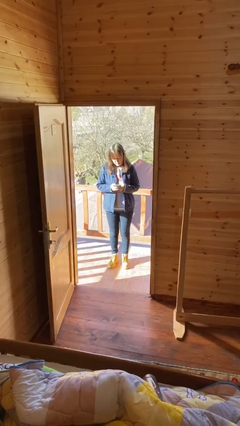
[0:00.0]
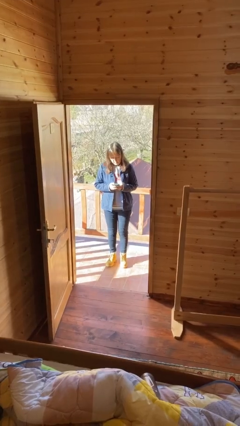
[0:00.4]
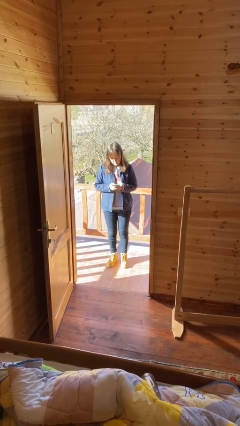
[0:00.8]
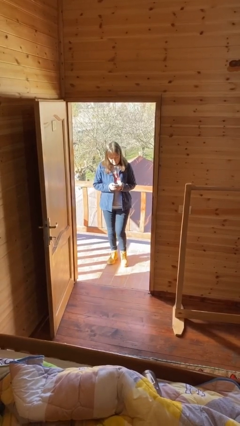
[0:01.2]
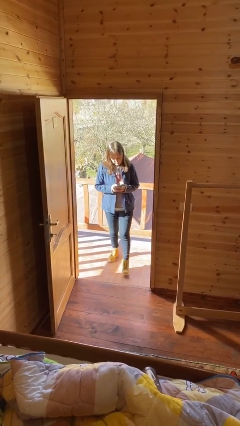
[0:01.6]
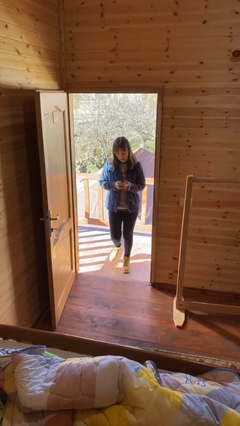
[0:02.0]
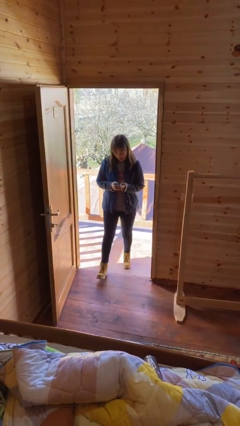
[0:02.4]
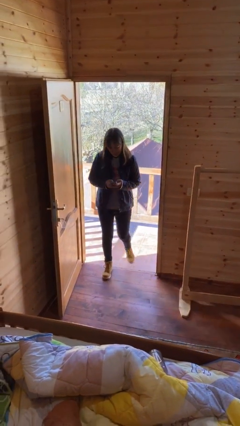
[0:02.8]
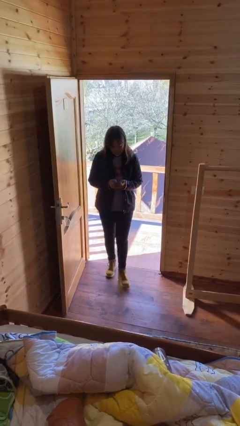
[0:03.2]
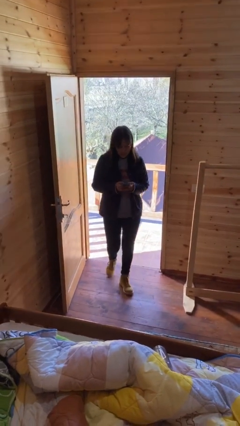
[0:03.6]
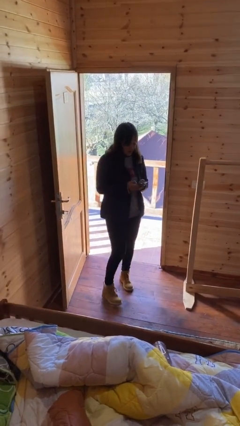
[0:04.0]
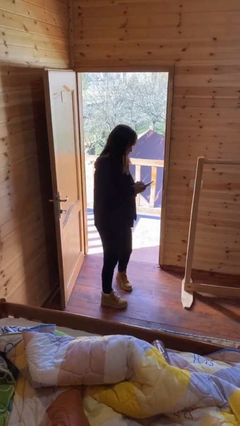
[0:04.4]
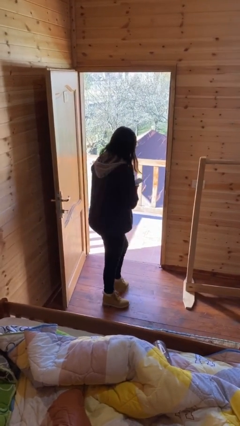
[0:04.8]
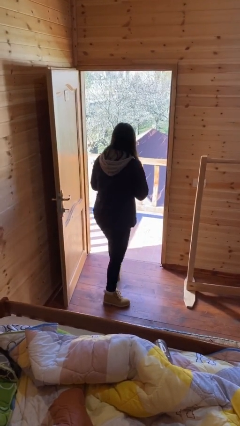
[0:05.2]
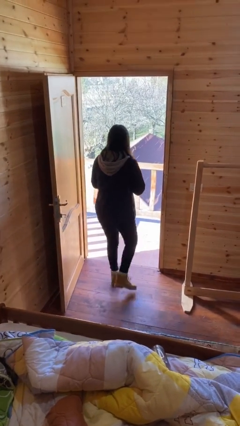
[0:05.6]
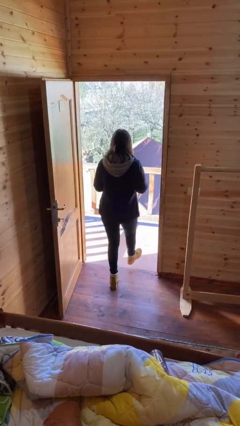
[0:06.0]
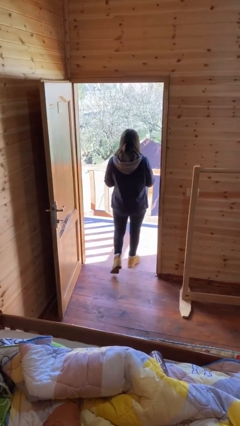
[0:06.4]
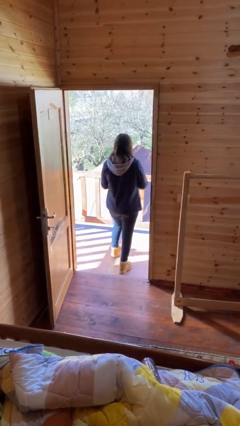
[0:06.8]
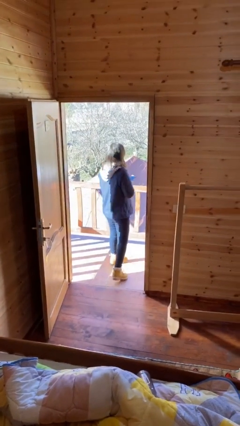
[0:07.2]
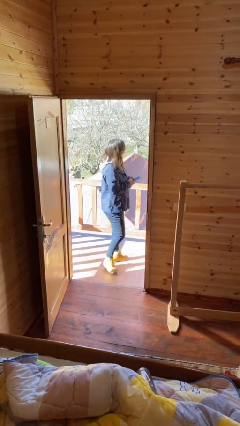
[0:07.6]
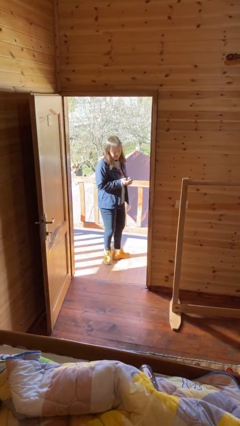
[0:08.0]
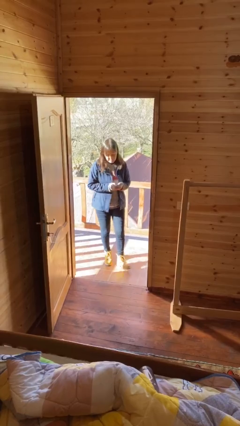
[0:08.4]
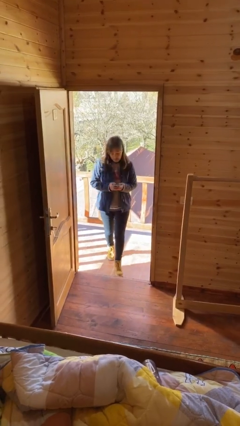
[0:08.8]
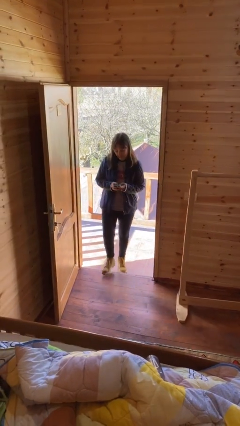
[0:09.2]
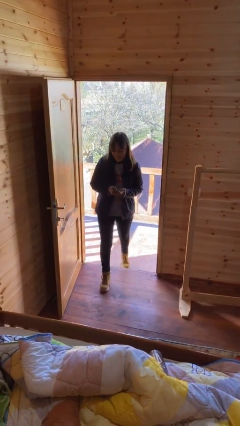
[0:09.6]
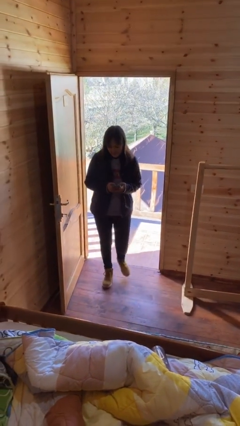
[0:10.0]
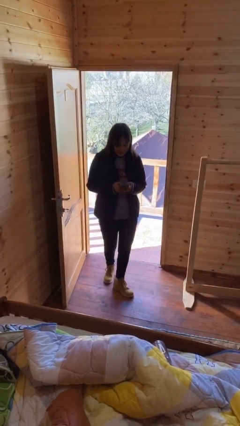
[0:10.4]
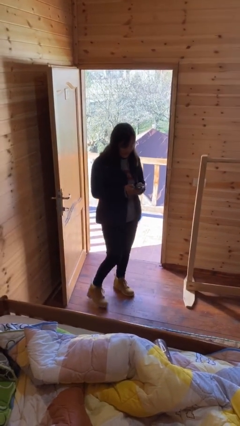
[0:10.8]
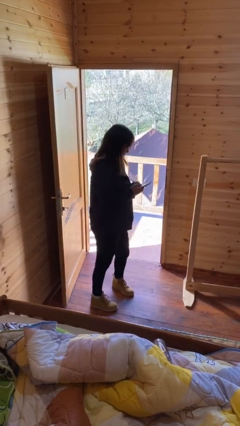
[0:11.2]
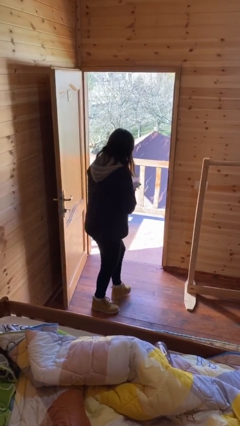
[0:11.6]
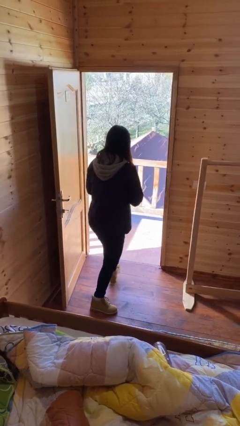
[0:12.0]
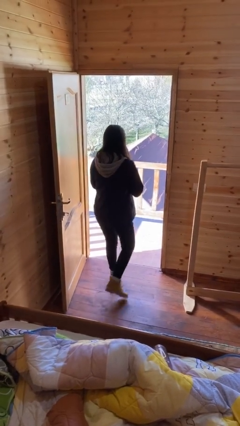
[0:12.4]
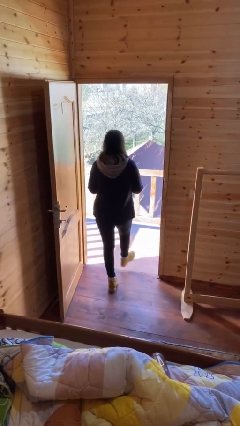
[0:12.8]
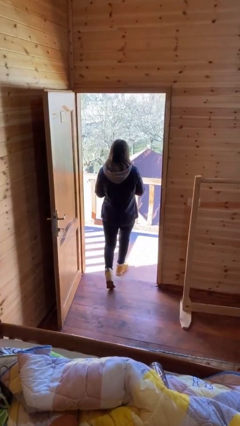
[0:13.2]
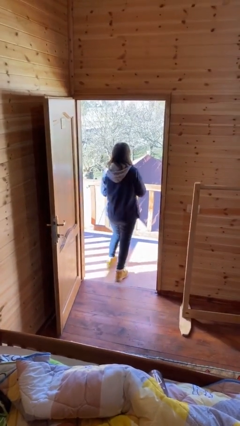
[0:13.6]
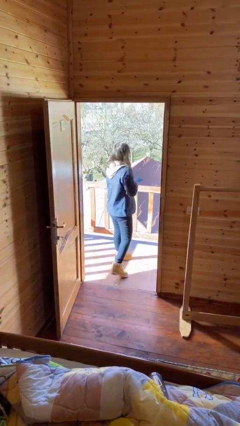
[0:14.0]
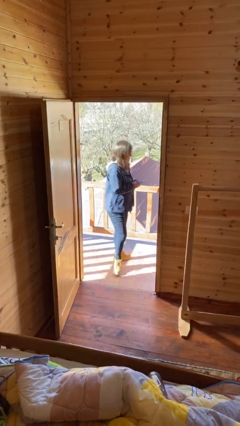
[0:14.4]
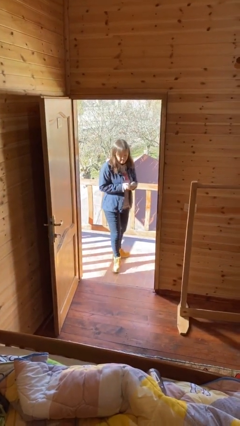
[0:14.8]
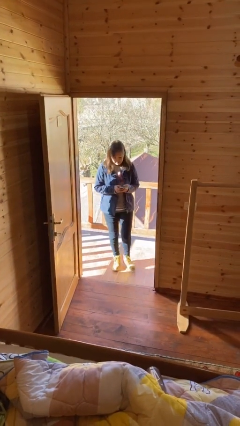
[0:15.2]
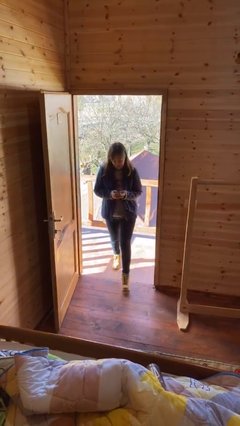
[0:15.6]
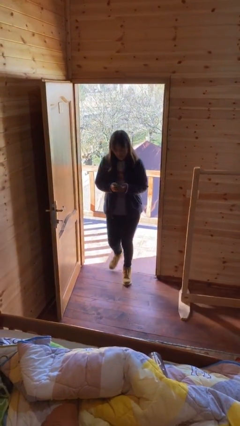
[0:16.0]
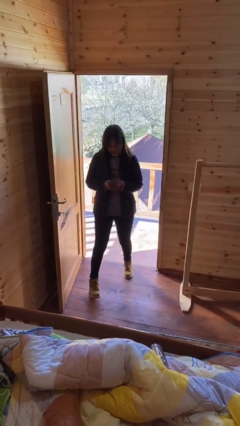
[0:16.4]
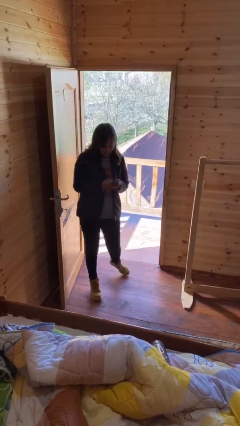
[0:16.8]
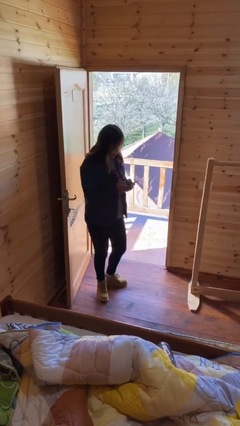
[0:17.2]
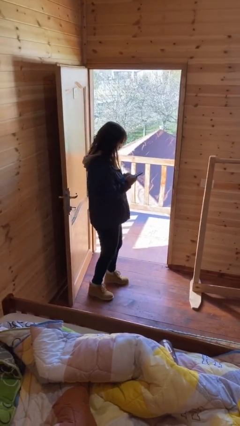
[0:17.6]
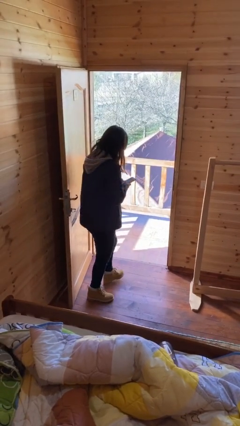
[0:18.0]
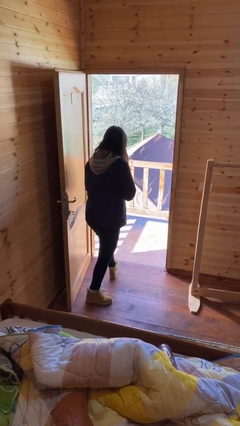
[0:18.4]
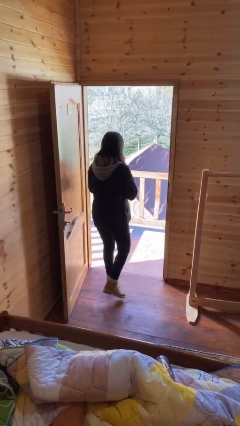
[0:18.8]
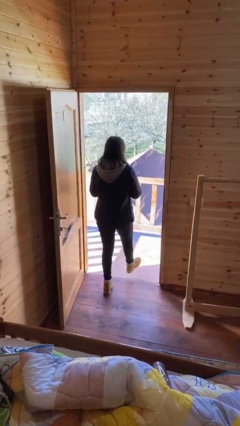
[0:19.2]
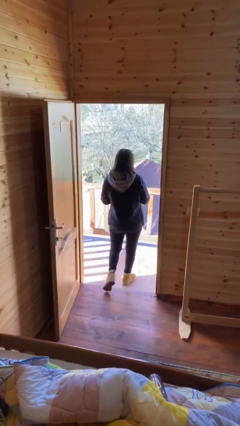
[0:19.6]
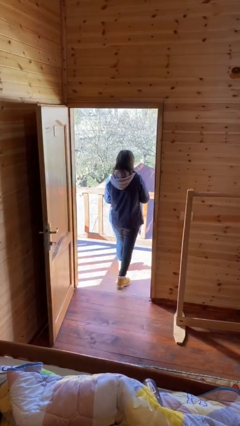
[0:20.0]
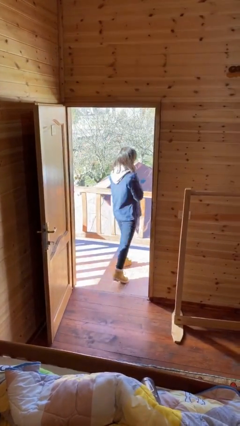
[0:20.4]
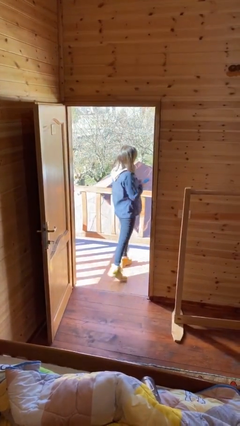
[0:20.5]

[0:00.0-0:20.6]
person texts on phone

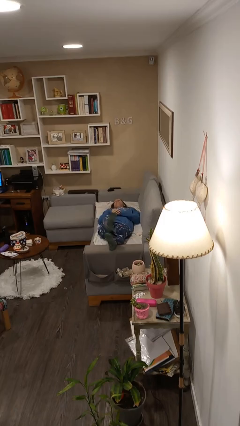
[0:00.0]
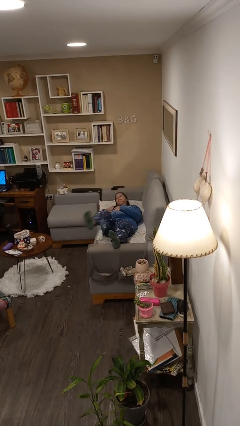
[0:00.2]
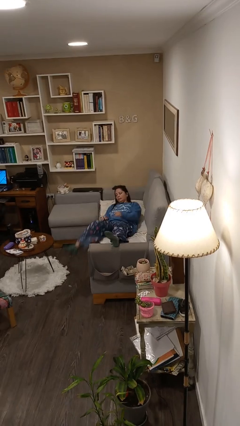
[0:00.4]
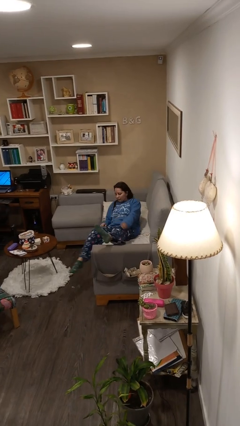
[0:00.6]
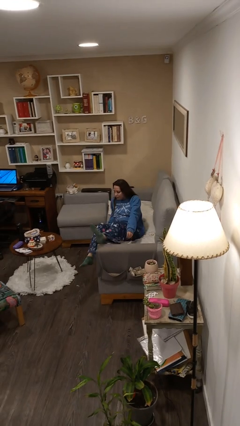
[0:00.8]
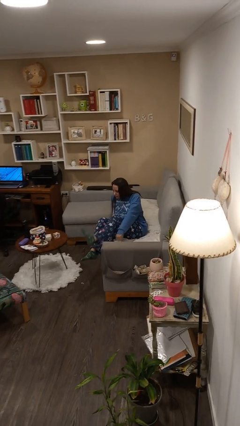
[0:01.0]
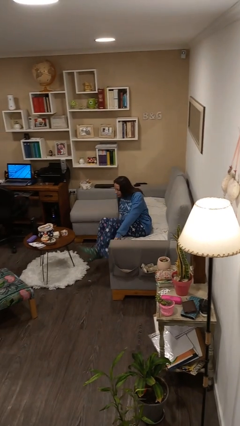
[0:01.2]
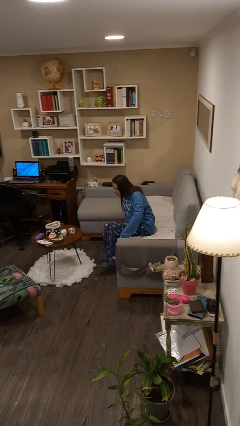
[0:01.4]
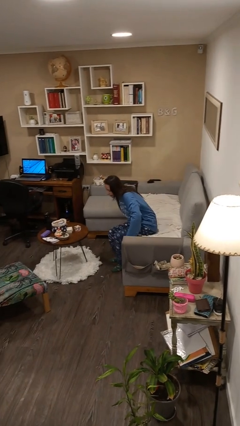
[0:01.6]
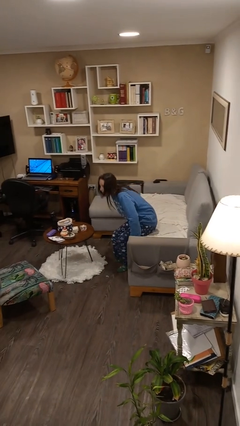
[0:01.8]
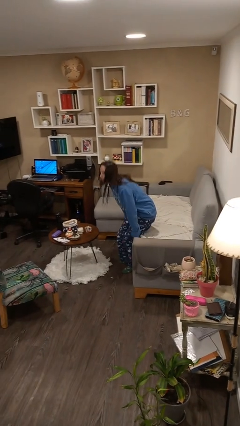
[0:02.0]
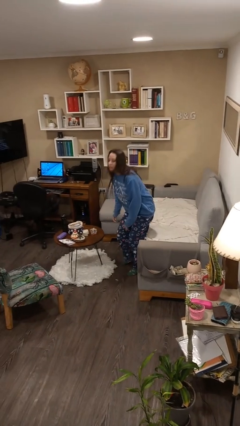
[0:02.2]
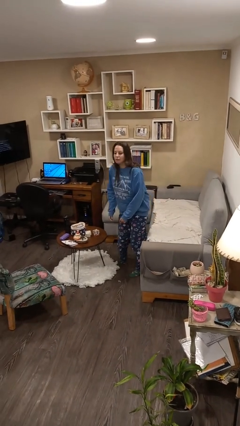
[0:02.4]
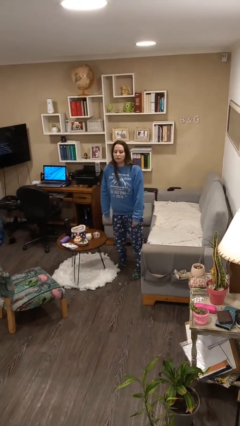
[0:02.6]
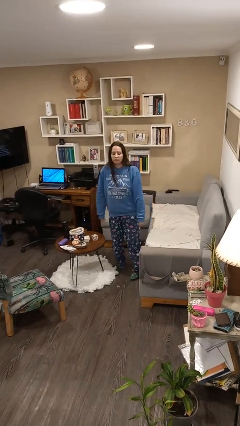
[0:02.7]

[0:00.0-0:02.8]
person stands up

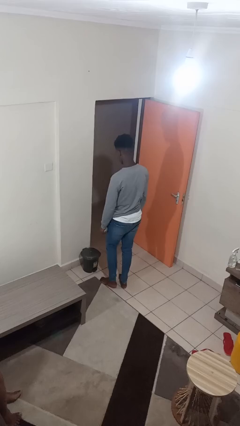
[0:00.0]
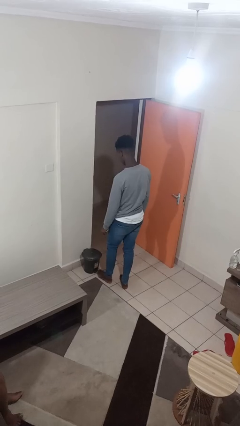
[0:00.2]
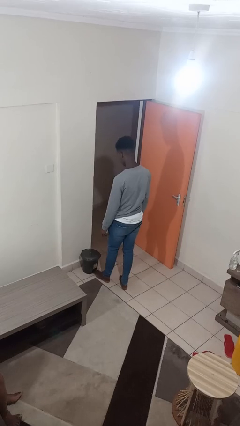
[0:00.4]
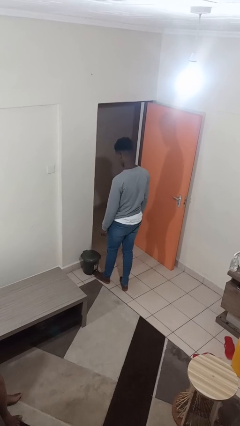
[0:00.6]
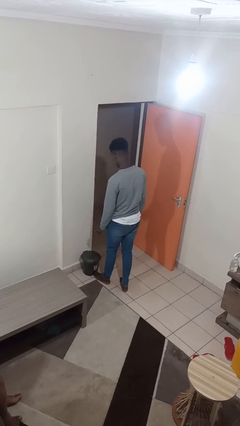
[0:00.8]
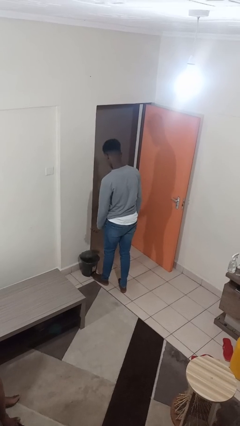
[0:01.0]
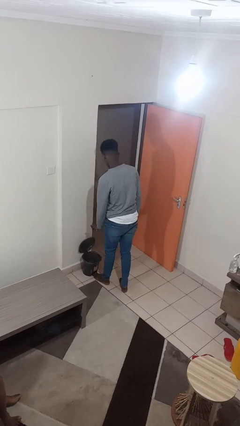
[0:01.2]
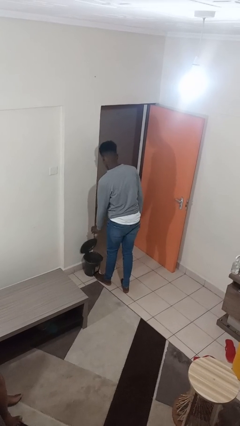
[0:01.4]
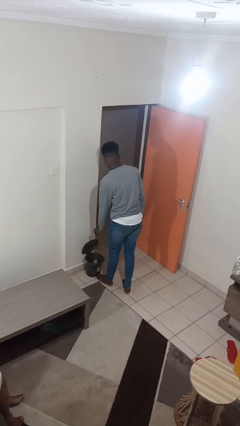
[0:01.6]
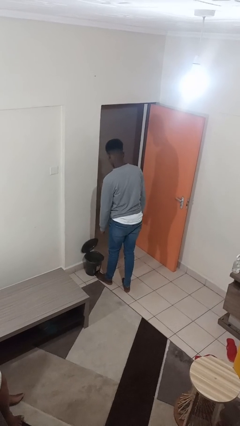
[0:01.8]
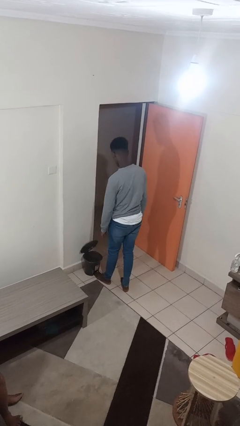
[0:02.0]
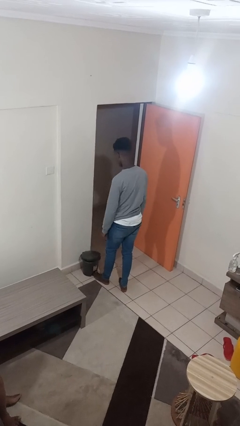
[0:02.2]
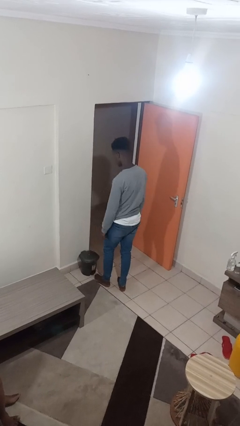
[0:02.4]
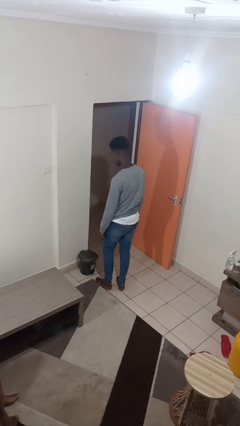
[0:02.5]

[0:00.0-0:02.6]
person discards trash

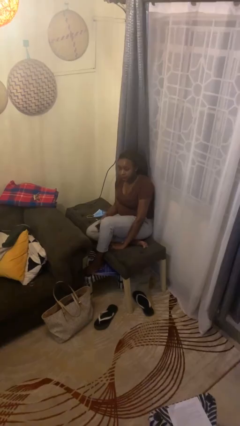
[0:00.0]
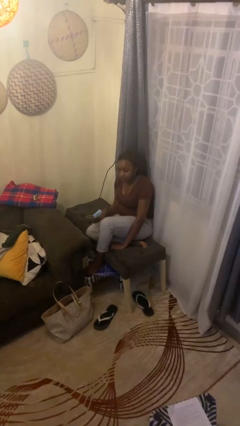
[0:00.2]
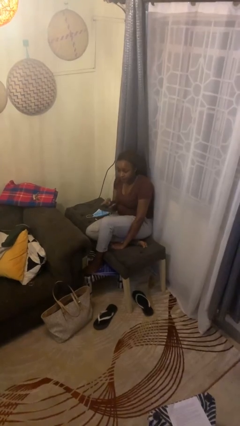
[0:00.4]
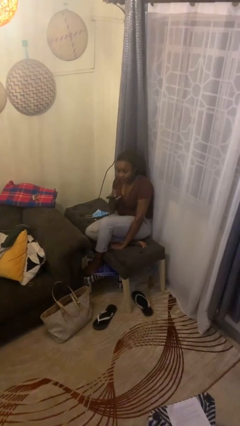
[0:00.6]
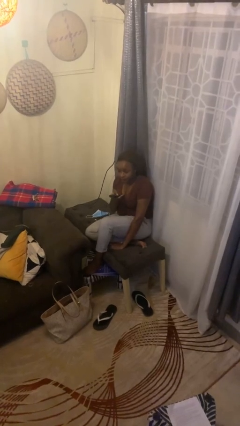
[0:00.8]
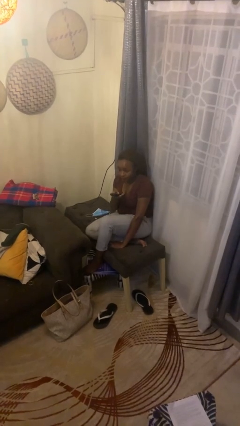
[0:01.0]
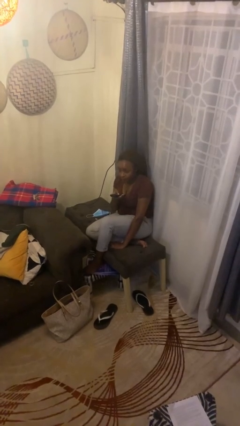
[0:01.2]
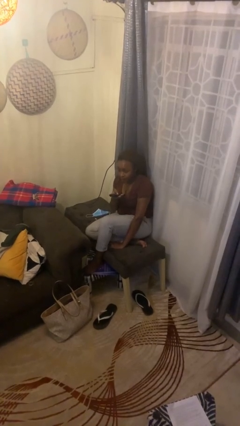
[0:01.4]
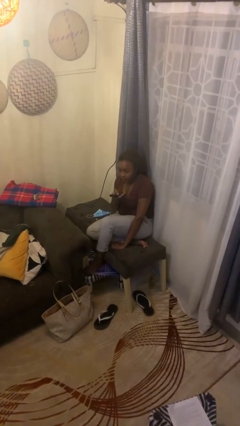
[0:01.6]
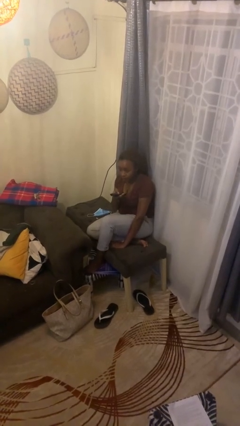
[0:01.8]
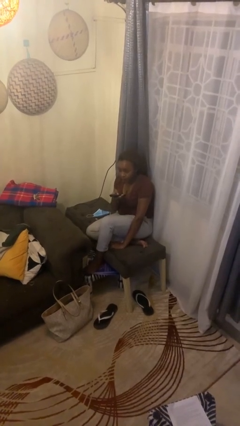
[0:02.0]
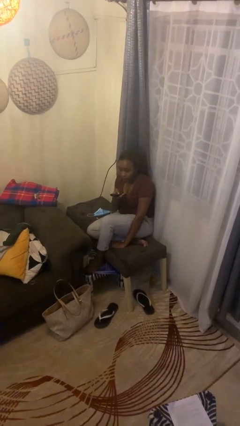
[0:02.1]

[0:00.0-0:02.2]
person uses television remote
